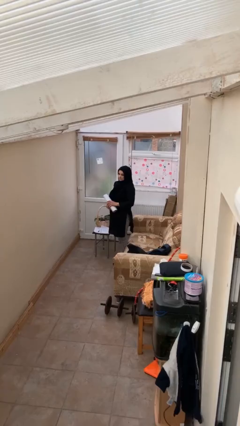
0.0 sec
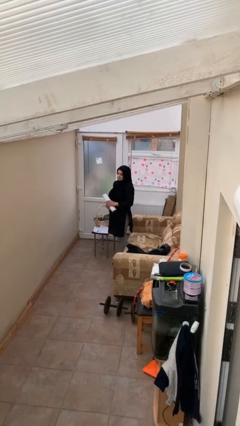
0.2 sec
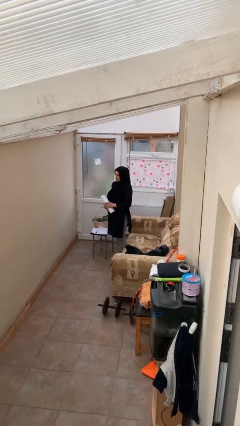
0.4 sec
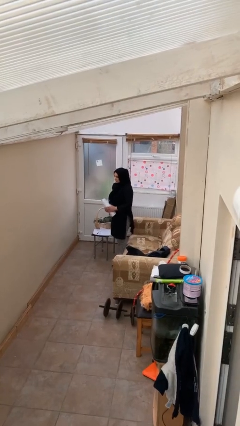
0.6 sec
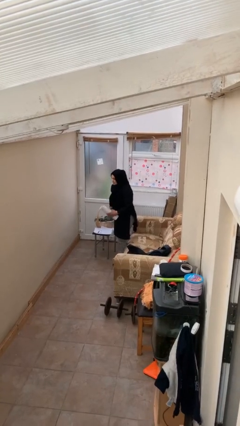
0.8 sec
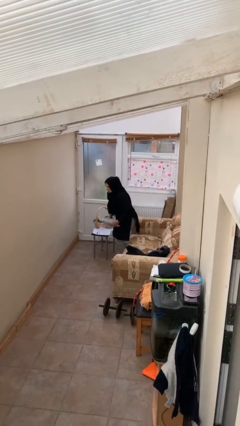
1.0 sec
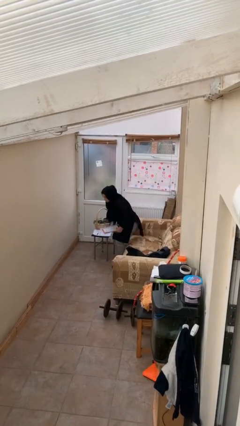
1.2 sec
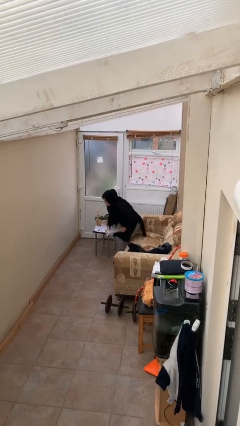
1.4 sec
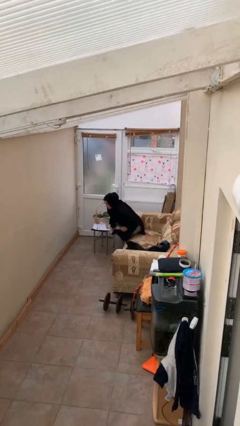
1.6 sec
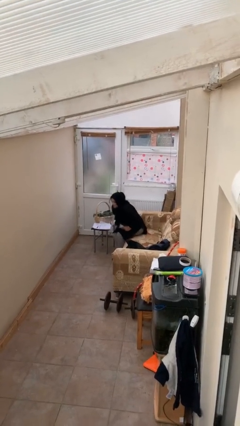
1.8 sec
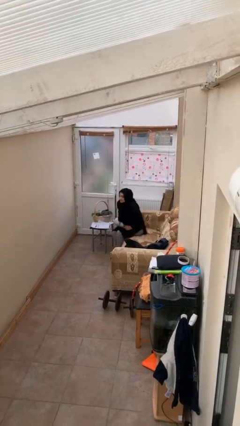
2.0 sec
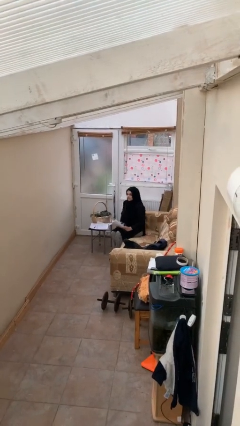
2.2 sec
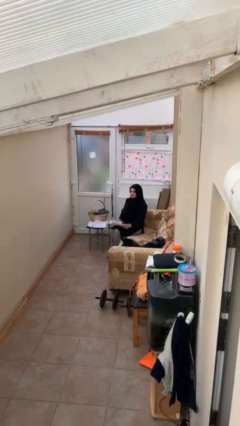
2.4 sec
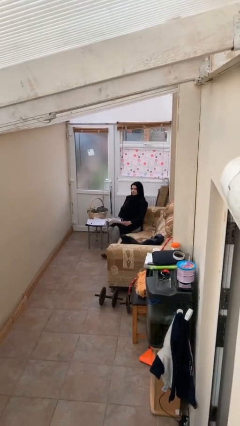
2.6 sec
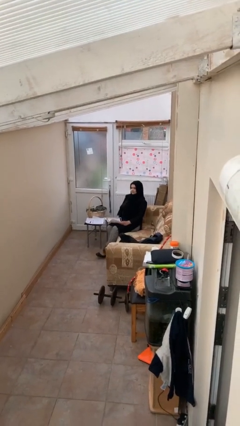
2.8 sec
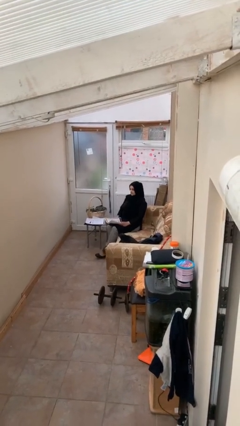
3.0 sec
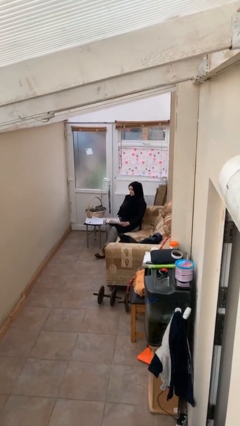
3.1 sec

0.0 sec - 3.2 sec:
person sits down

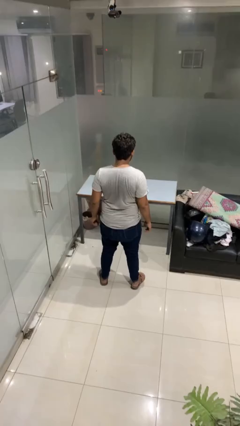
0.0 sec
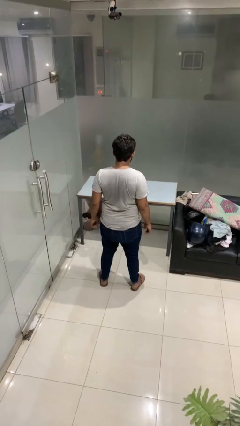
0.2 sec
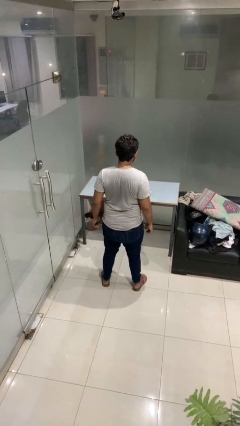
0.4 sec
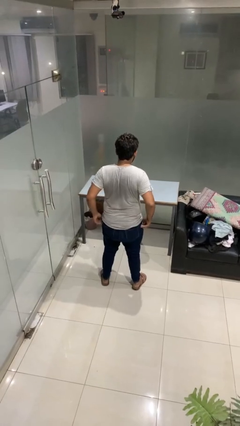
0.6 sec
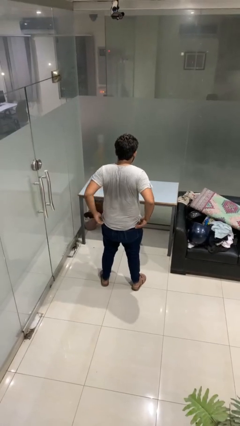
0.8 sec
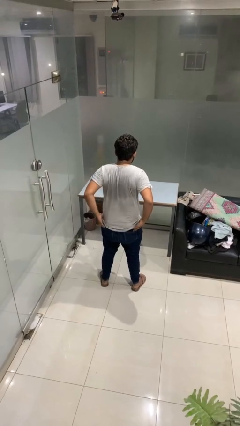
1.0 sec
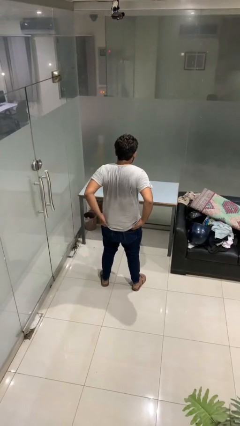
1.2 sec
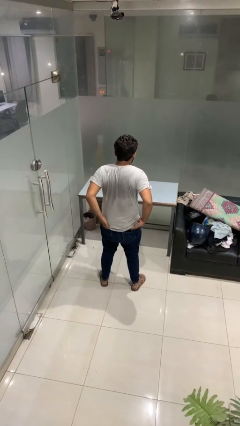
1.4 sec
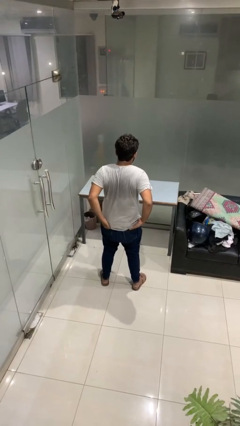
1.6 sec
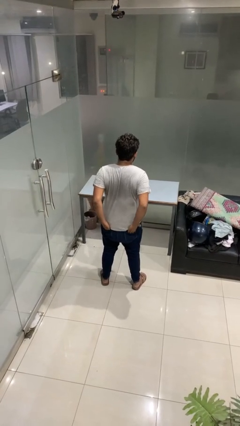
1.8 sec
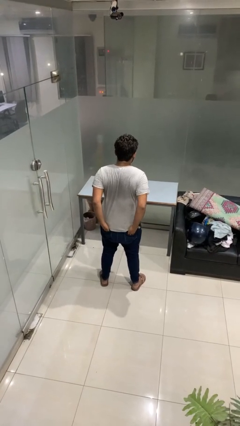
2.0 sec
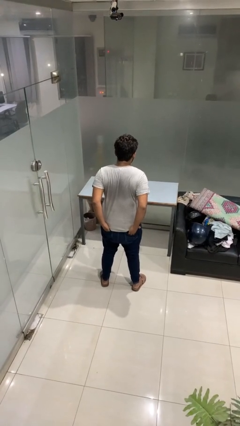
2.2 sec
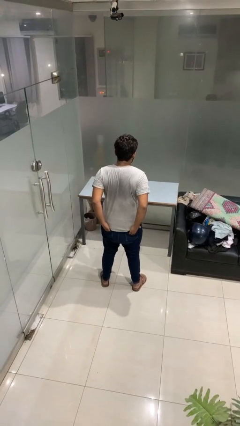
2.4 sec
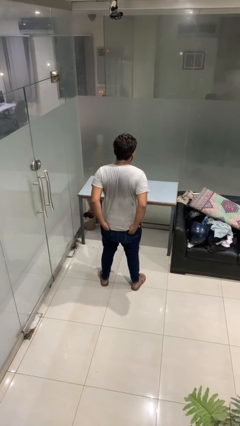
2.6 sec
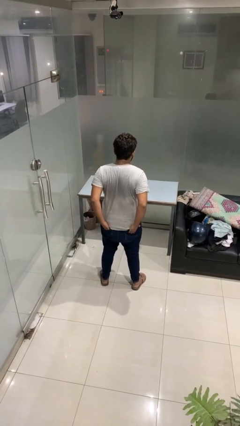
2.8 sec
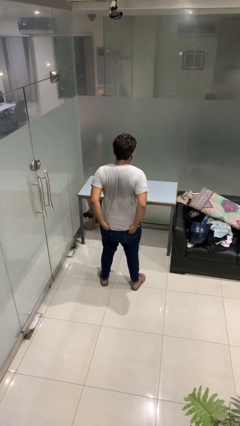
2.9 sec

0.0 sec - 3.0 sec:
person puts hands in back pockets

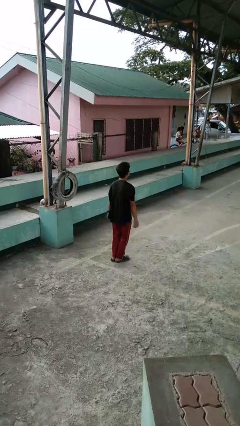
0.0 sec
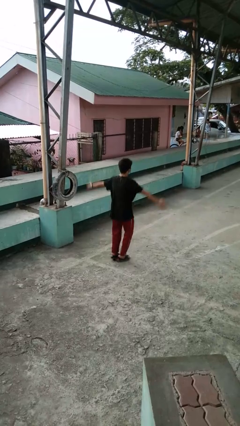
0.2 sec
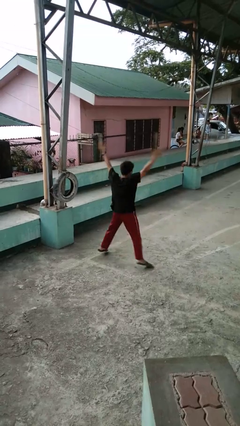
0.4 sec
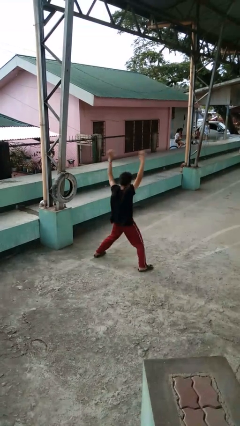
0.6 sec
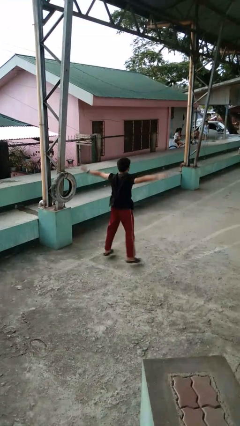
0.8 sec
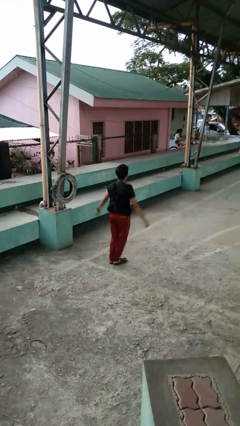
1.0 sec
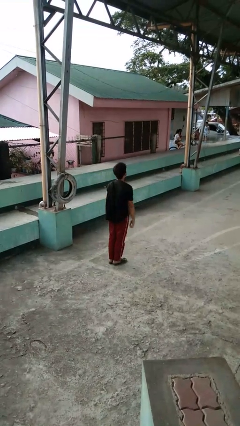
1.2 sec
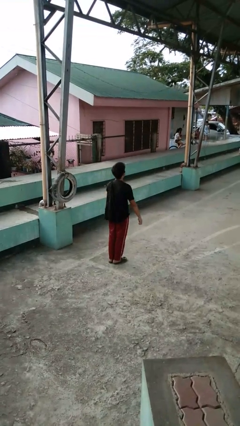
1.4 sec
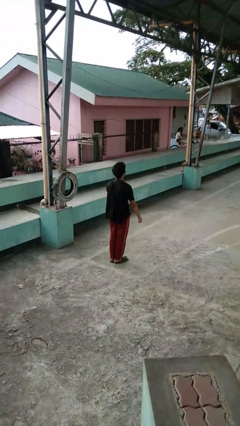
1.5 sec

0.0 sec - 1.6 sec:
person exercises with jumping jacks

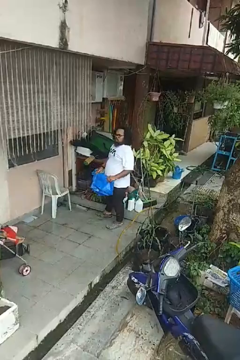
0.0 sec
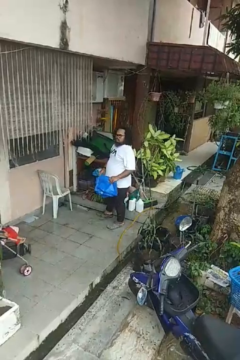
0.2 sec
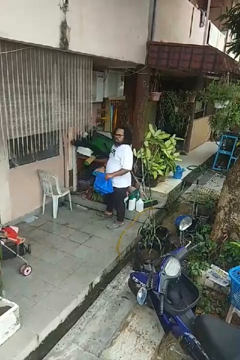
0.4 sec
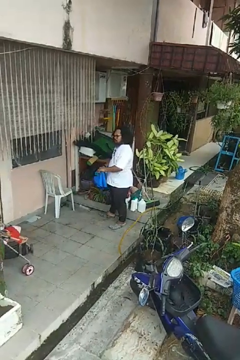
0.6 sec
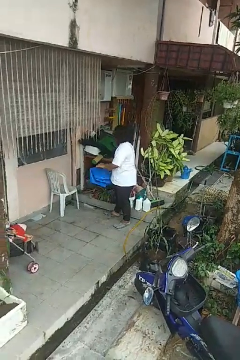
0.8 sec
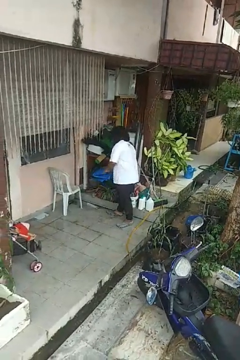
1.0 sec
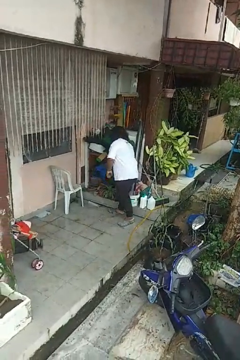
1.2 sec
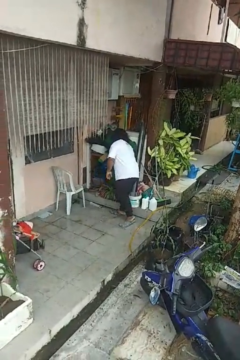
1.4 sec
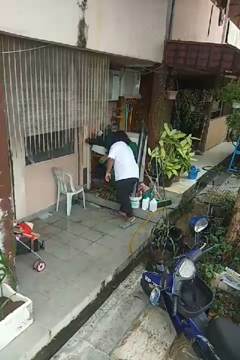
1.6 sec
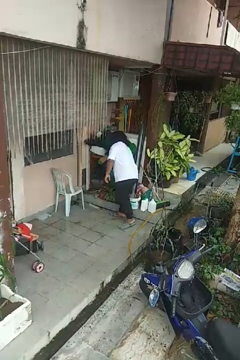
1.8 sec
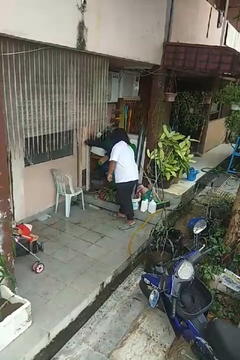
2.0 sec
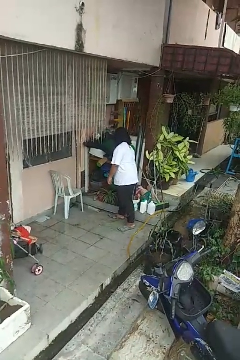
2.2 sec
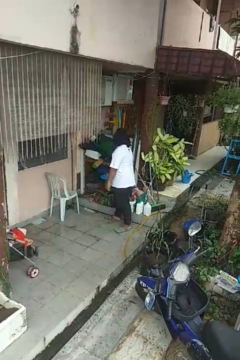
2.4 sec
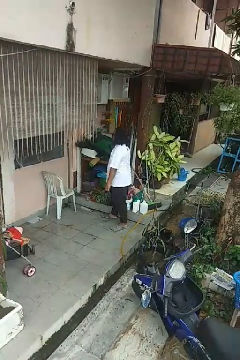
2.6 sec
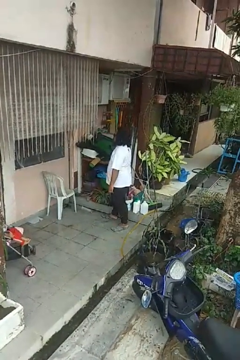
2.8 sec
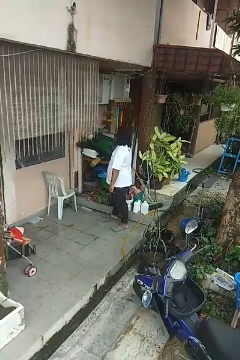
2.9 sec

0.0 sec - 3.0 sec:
person puts down object into cabinet

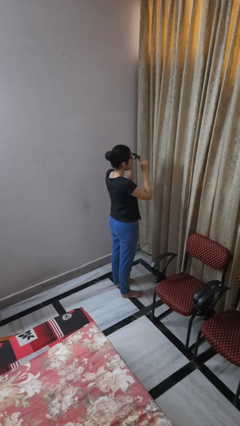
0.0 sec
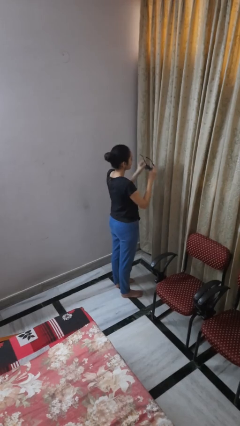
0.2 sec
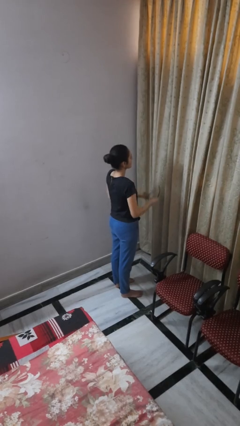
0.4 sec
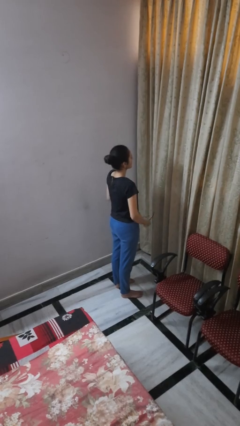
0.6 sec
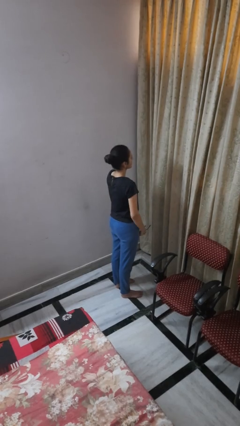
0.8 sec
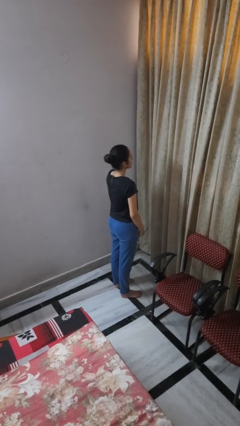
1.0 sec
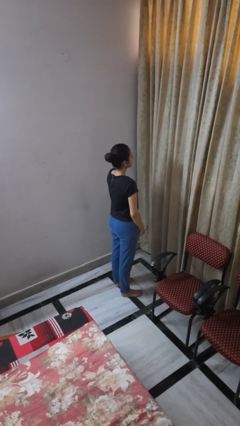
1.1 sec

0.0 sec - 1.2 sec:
person takes off sunglasses

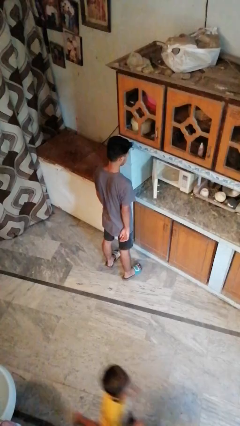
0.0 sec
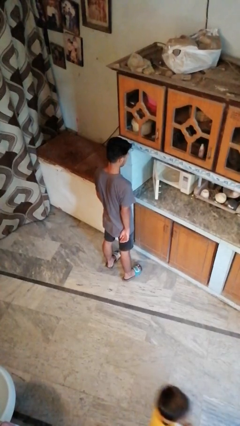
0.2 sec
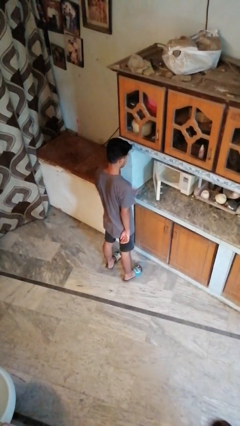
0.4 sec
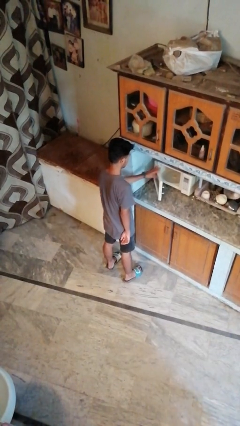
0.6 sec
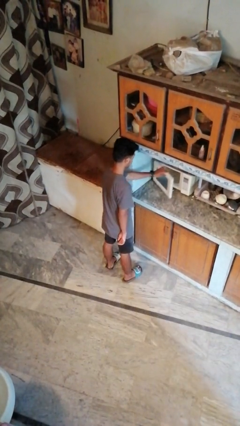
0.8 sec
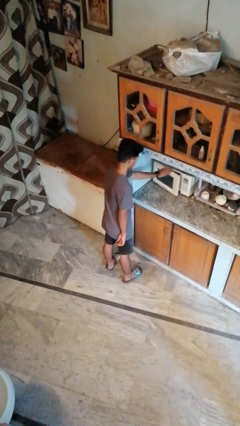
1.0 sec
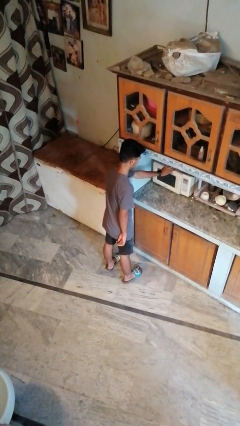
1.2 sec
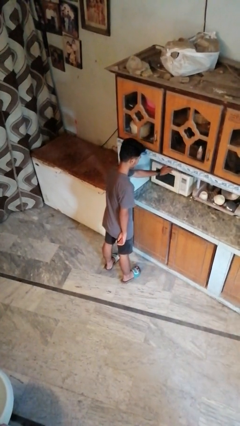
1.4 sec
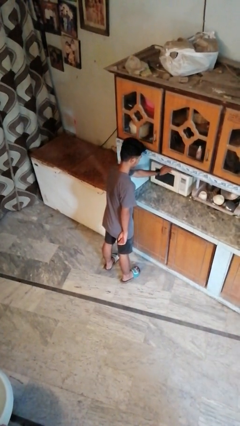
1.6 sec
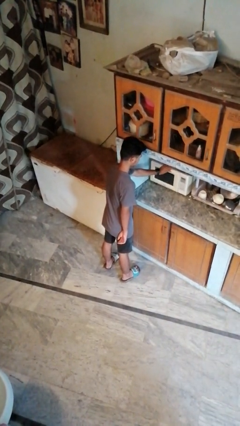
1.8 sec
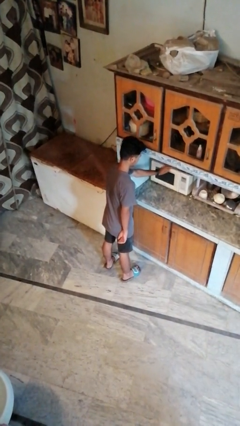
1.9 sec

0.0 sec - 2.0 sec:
person closes oven door

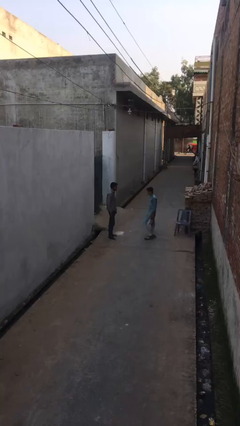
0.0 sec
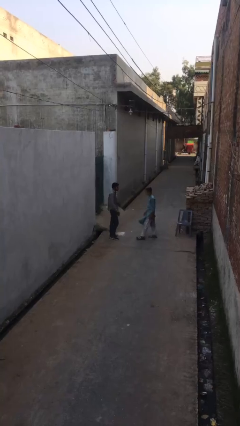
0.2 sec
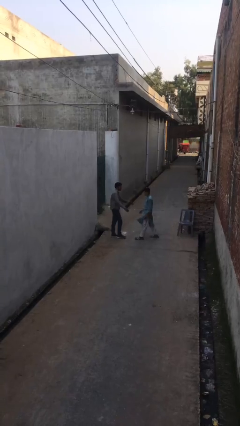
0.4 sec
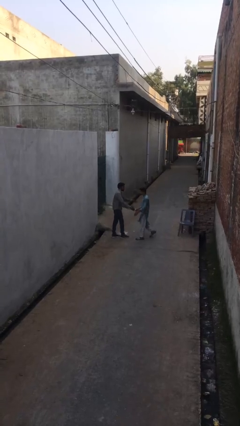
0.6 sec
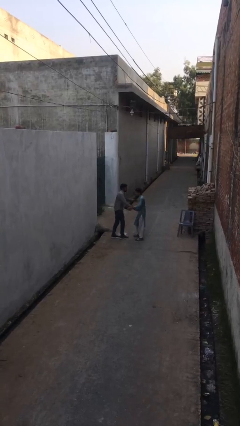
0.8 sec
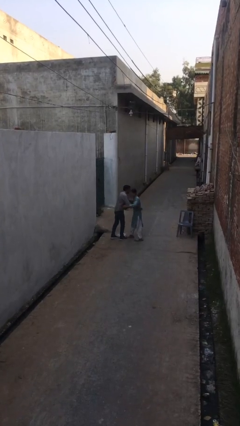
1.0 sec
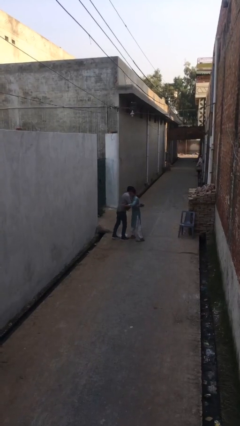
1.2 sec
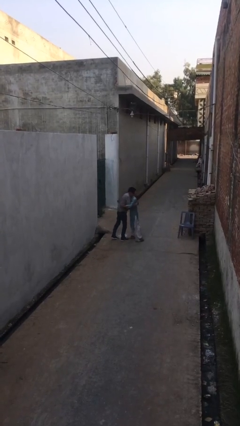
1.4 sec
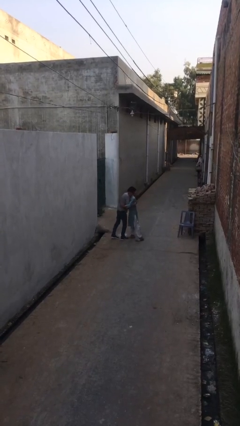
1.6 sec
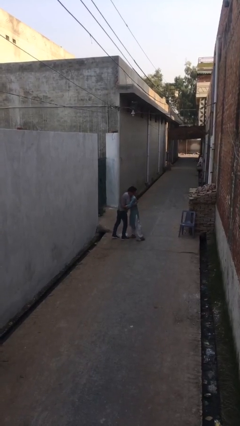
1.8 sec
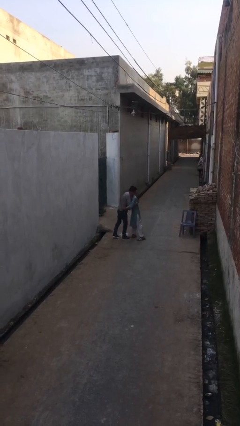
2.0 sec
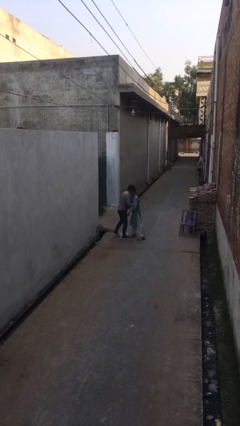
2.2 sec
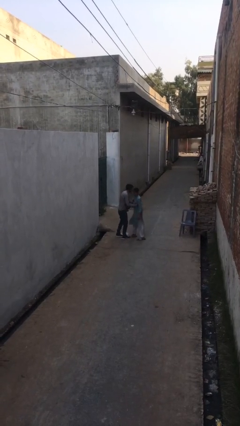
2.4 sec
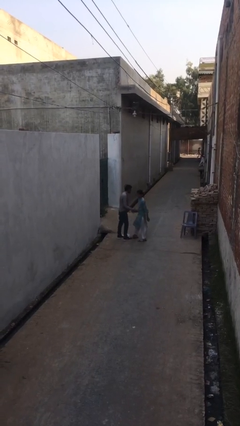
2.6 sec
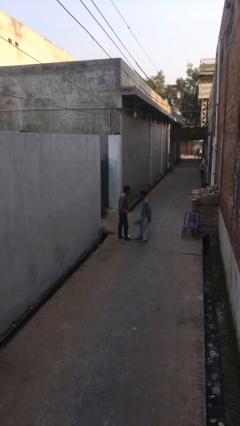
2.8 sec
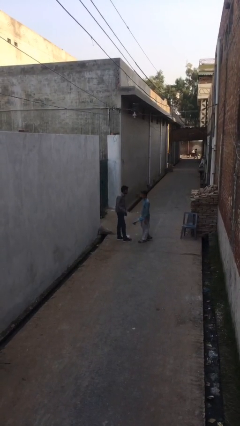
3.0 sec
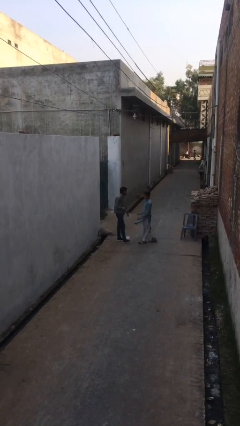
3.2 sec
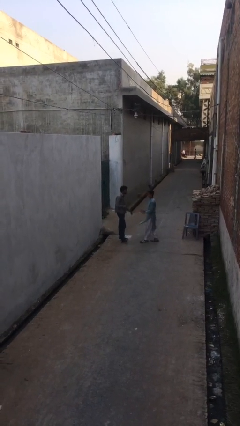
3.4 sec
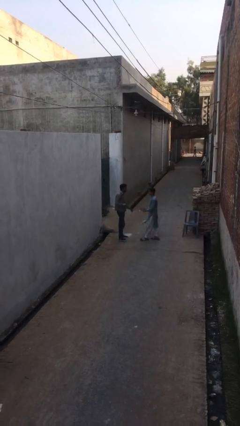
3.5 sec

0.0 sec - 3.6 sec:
person embraces person
